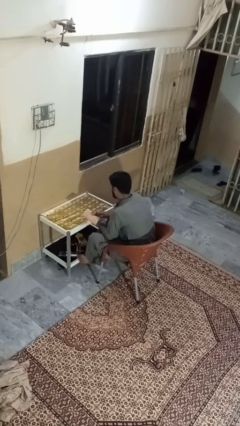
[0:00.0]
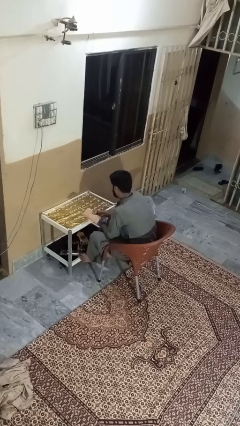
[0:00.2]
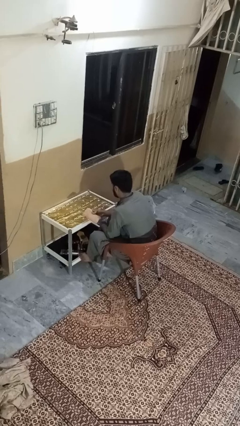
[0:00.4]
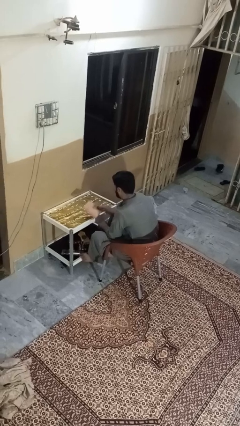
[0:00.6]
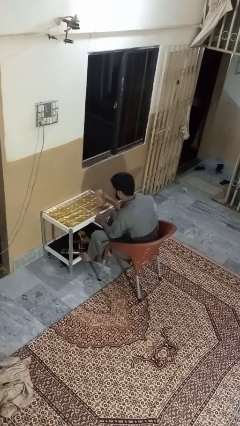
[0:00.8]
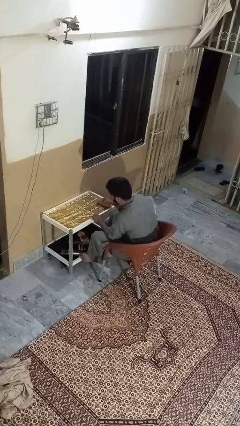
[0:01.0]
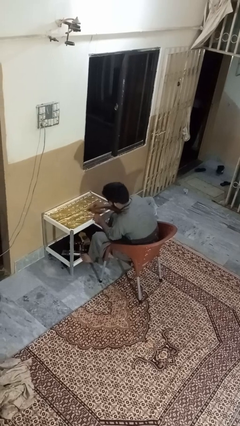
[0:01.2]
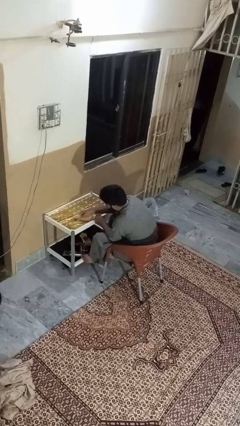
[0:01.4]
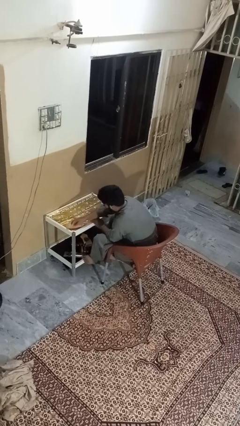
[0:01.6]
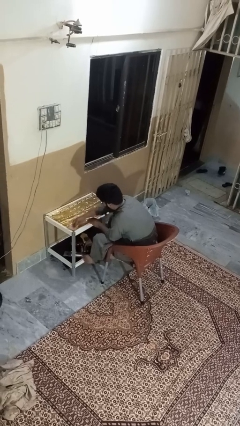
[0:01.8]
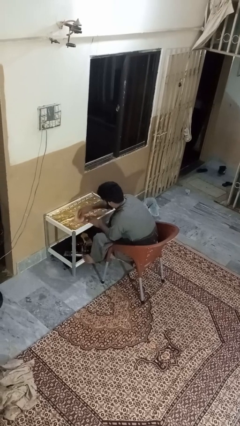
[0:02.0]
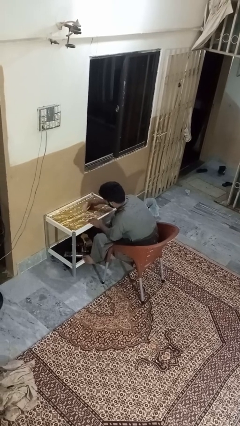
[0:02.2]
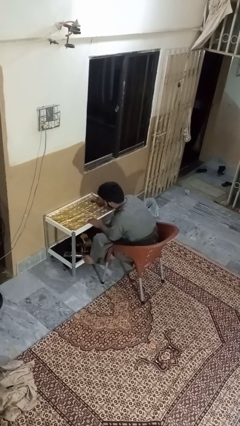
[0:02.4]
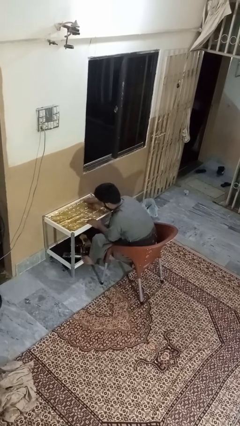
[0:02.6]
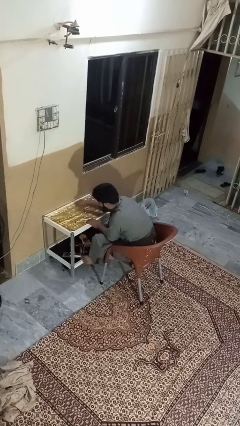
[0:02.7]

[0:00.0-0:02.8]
person cleans table with rag

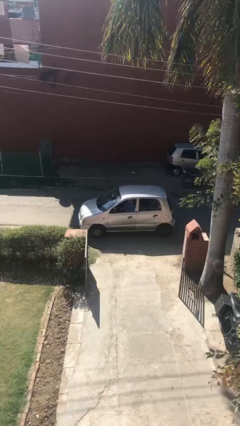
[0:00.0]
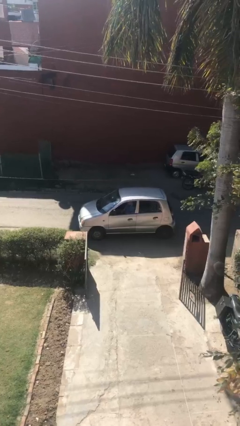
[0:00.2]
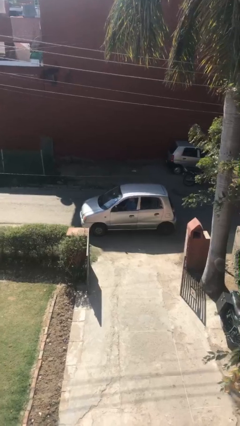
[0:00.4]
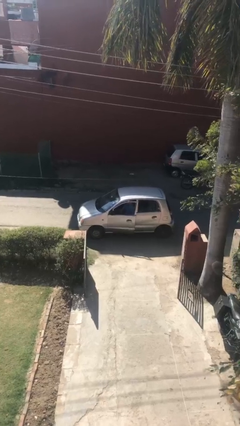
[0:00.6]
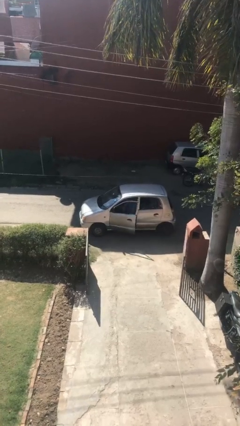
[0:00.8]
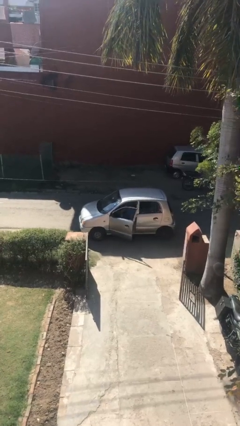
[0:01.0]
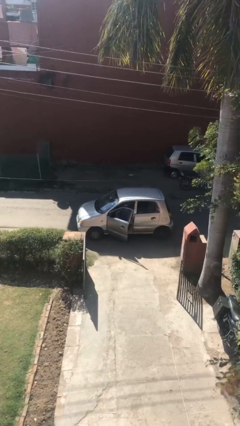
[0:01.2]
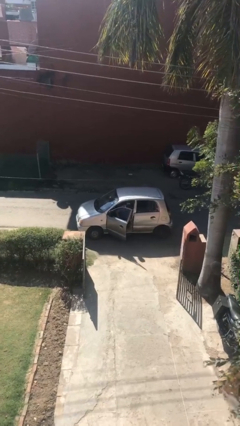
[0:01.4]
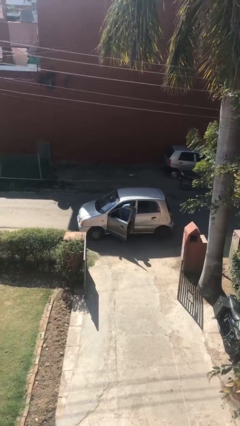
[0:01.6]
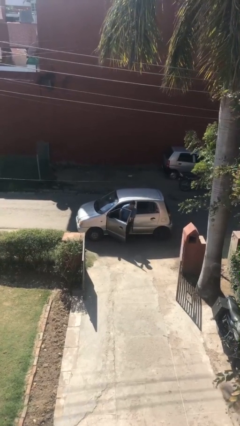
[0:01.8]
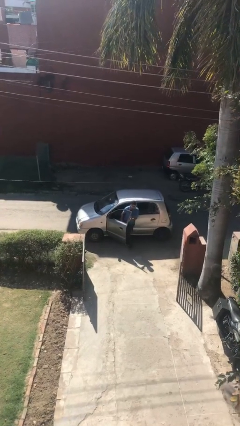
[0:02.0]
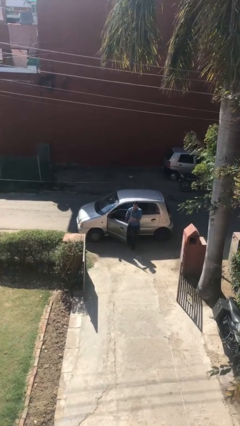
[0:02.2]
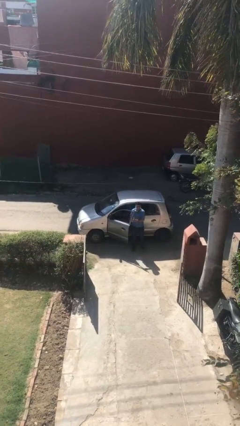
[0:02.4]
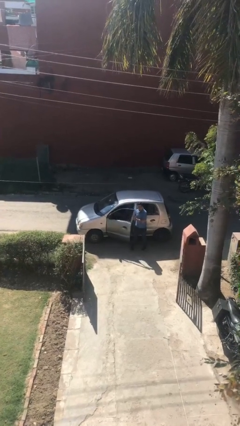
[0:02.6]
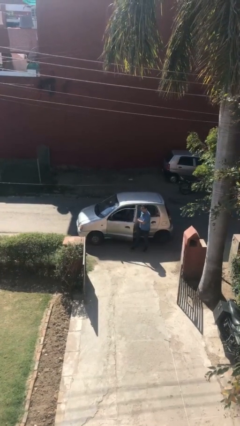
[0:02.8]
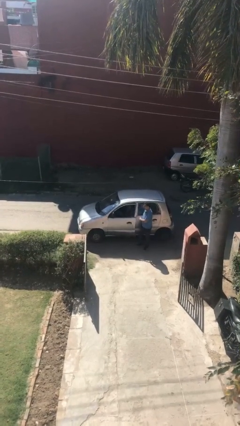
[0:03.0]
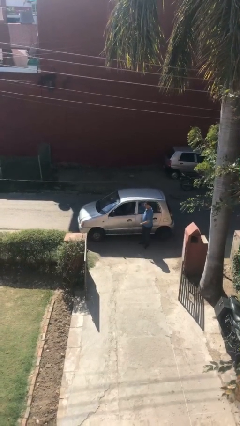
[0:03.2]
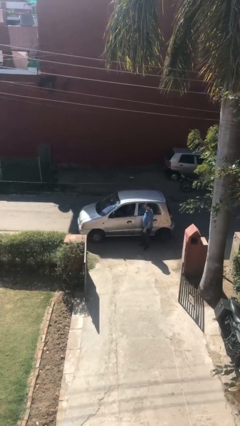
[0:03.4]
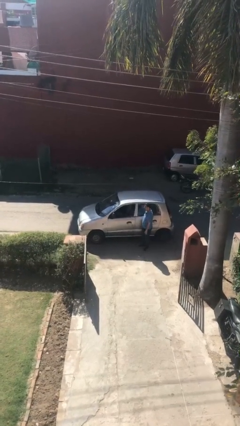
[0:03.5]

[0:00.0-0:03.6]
car drops off person

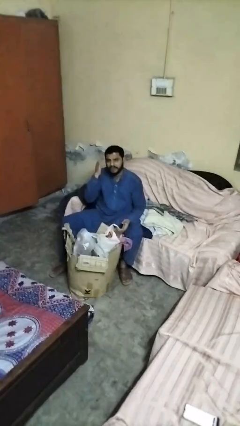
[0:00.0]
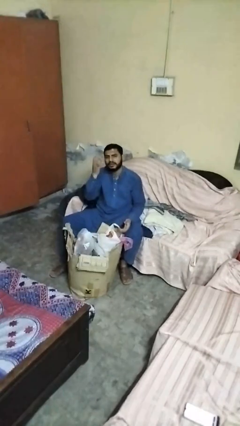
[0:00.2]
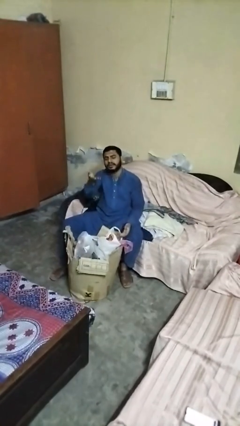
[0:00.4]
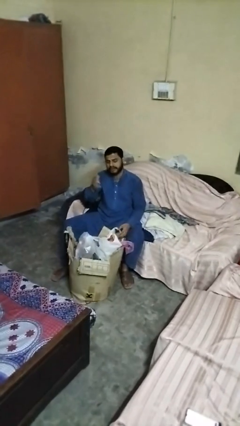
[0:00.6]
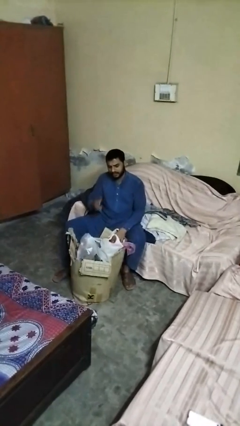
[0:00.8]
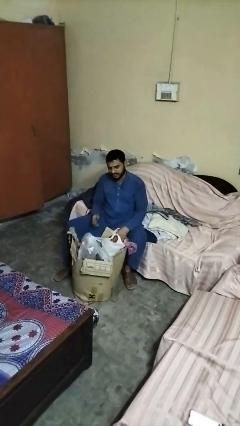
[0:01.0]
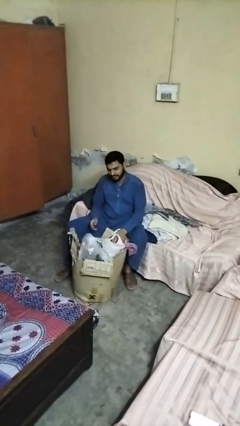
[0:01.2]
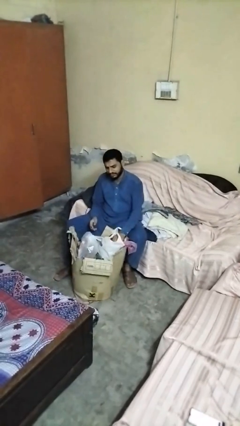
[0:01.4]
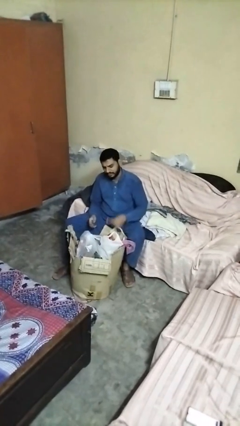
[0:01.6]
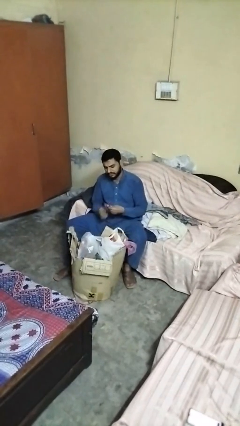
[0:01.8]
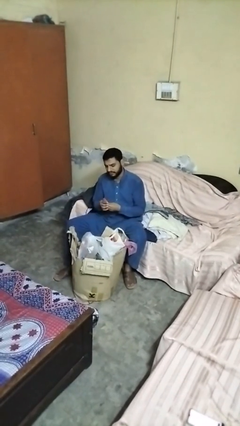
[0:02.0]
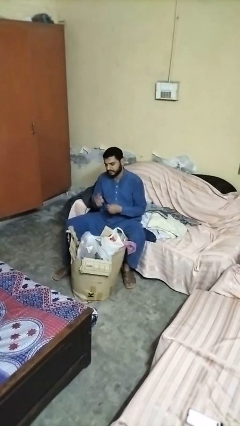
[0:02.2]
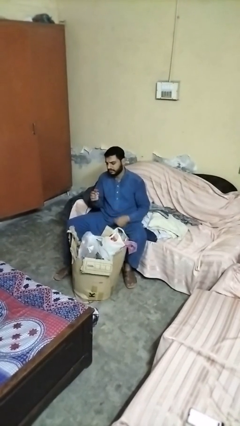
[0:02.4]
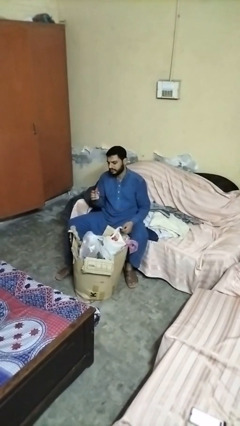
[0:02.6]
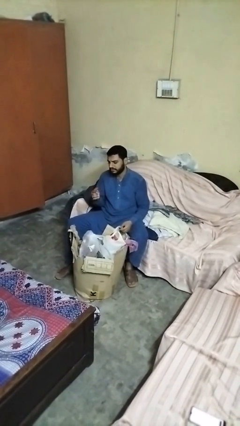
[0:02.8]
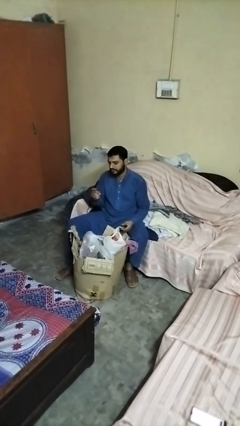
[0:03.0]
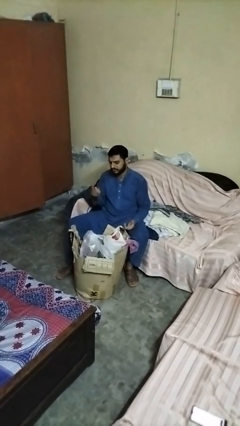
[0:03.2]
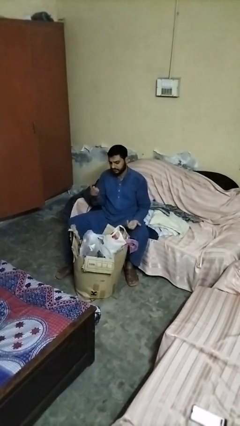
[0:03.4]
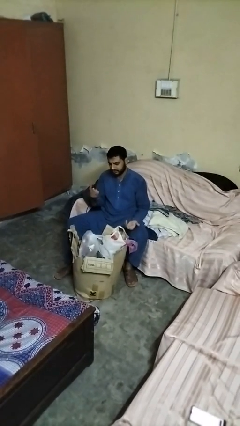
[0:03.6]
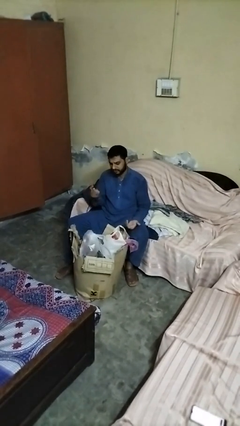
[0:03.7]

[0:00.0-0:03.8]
person takes object from box

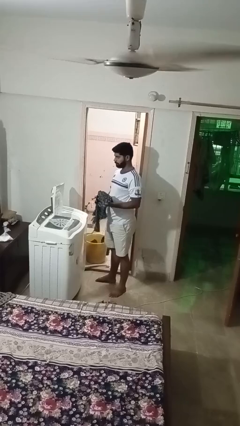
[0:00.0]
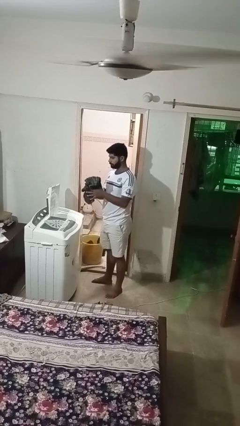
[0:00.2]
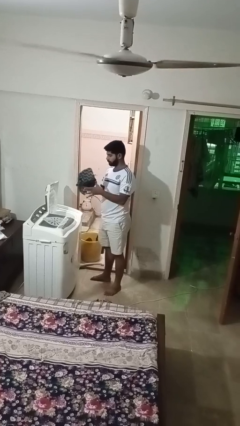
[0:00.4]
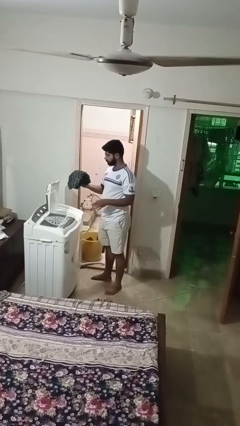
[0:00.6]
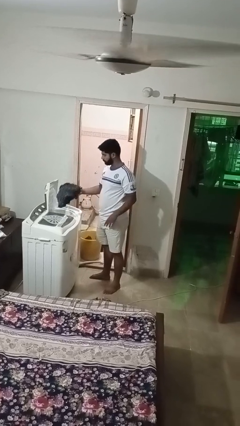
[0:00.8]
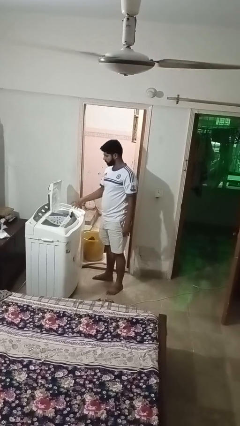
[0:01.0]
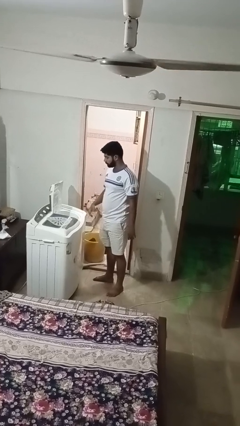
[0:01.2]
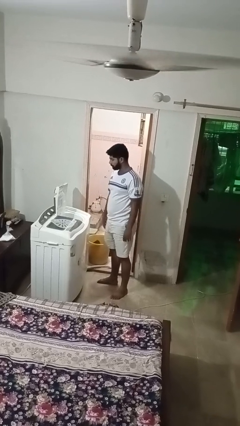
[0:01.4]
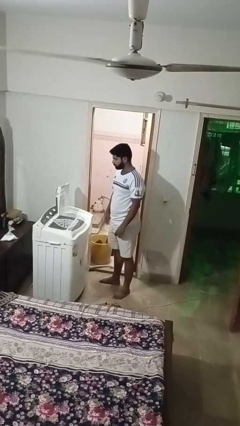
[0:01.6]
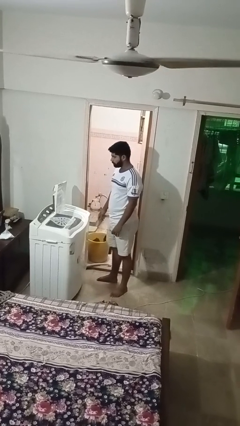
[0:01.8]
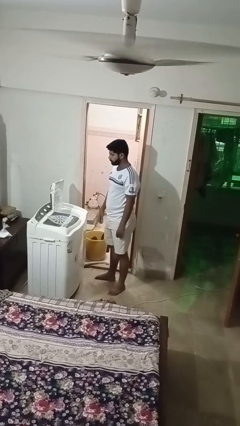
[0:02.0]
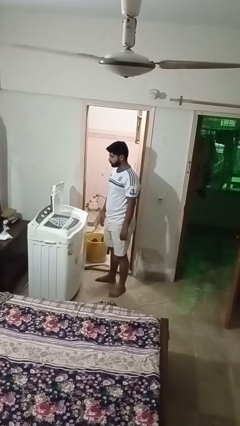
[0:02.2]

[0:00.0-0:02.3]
person loads dryer

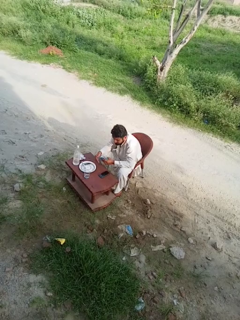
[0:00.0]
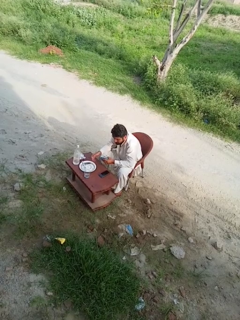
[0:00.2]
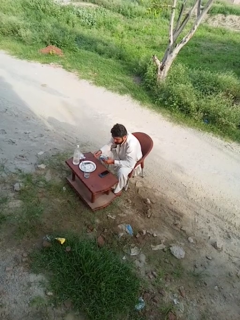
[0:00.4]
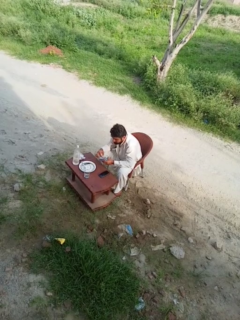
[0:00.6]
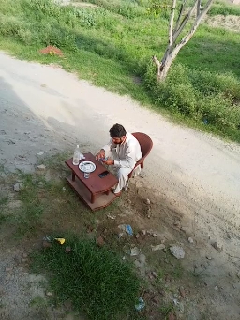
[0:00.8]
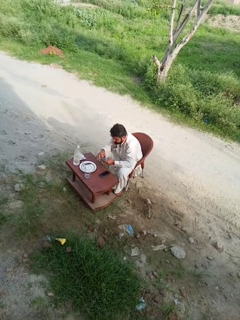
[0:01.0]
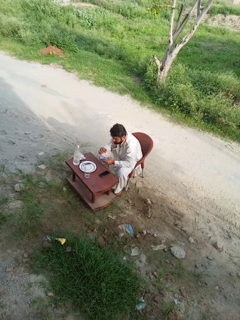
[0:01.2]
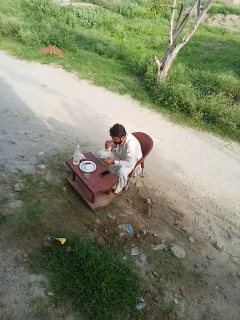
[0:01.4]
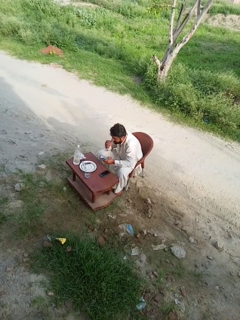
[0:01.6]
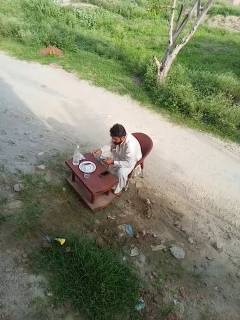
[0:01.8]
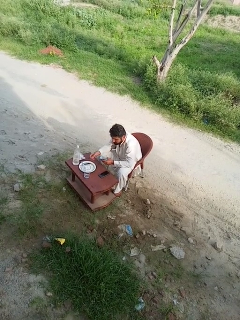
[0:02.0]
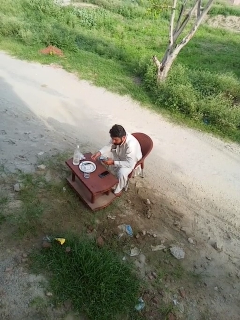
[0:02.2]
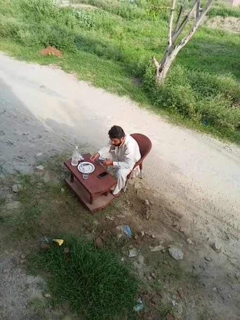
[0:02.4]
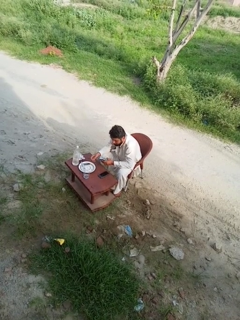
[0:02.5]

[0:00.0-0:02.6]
person eats with hands

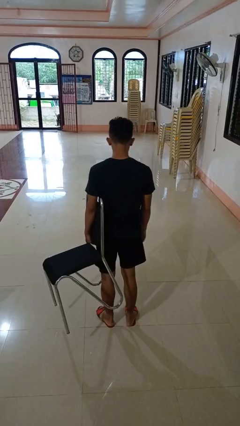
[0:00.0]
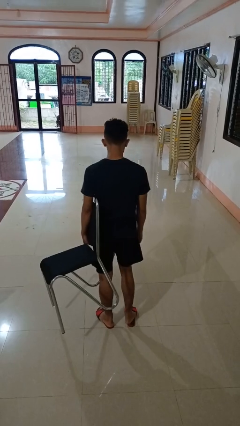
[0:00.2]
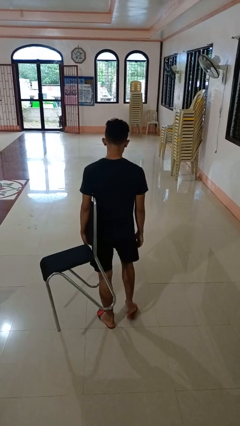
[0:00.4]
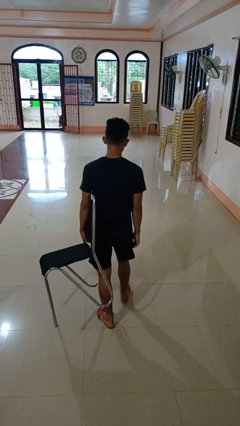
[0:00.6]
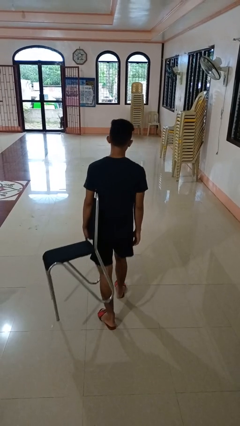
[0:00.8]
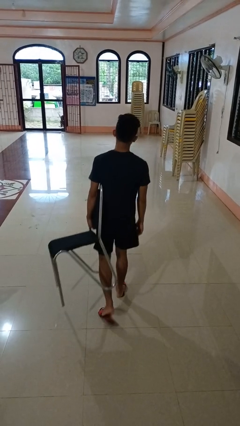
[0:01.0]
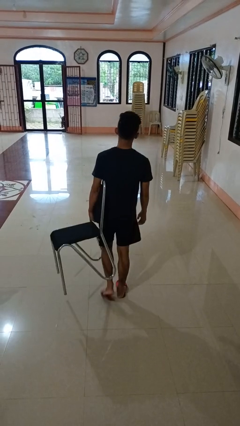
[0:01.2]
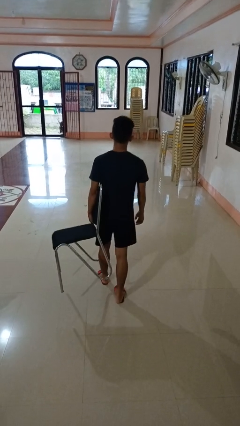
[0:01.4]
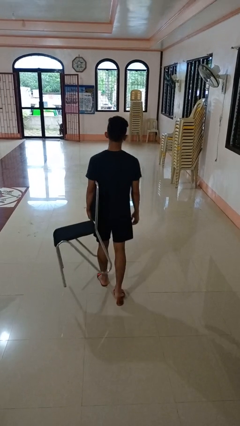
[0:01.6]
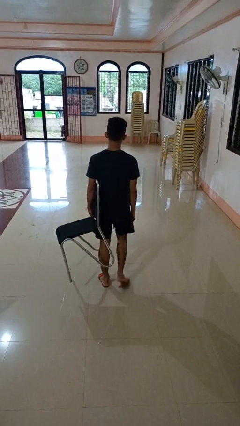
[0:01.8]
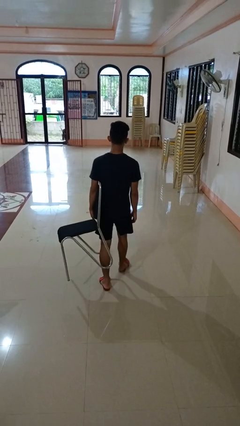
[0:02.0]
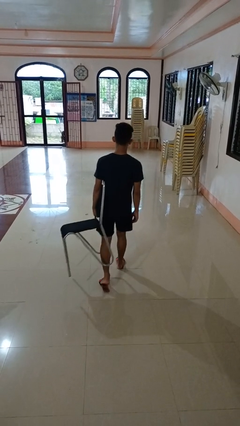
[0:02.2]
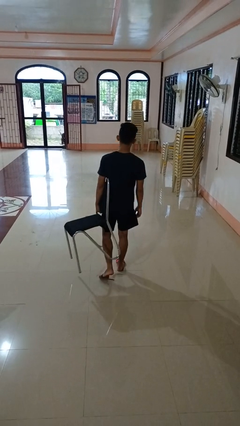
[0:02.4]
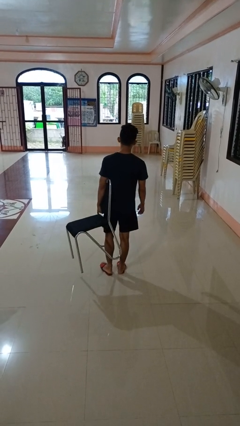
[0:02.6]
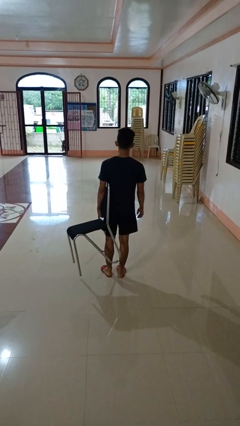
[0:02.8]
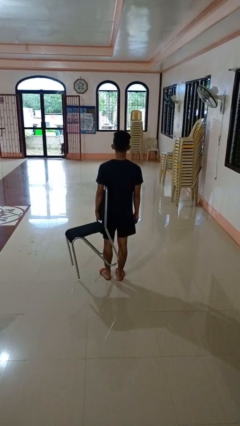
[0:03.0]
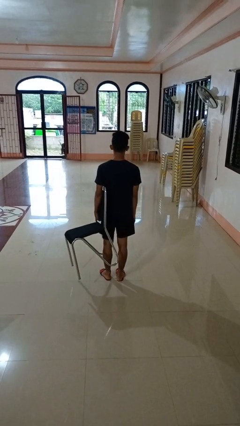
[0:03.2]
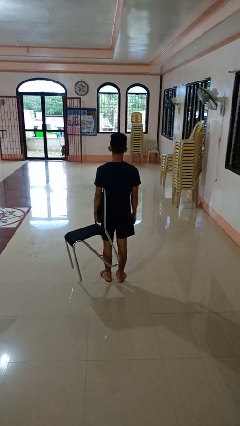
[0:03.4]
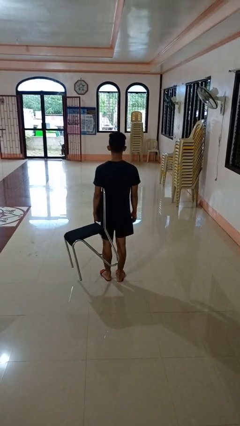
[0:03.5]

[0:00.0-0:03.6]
person carries furniture
